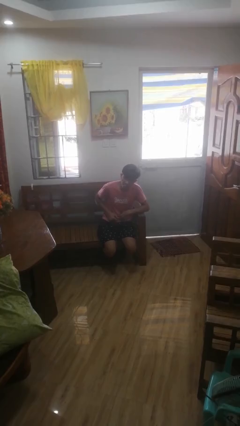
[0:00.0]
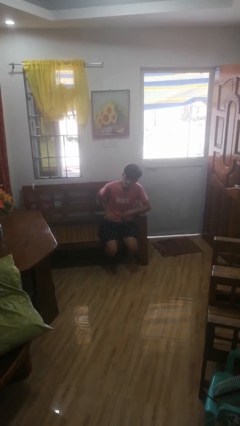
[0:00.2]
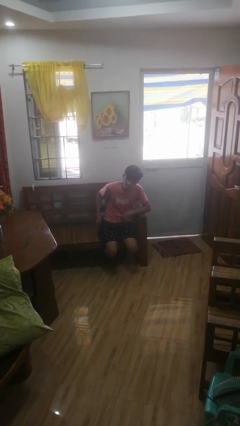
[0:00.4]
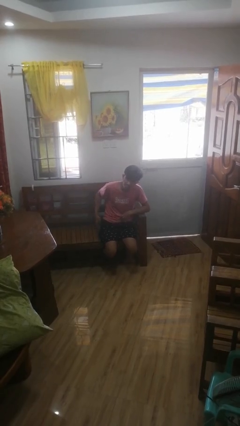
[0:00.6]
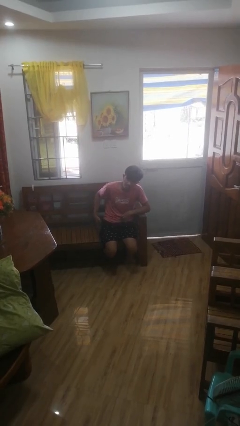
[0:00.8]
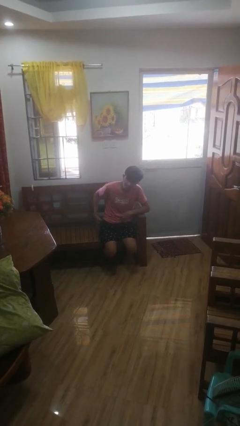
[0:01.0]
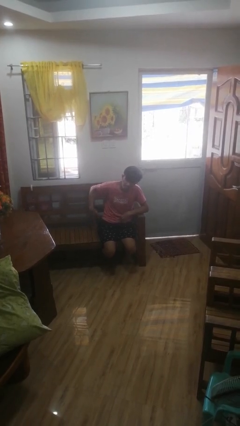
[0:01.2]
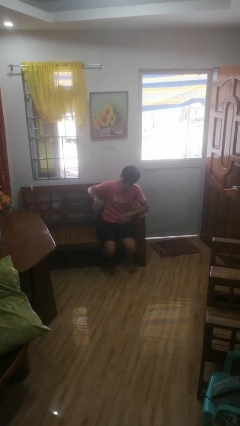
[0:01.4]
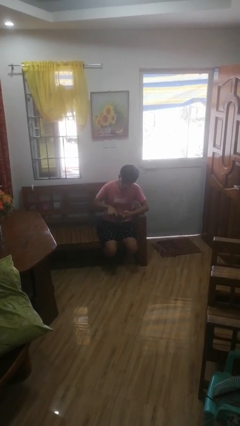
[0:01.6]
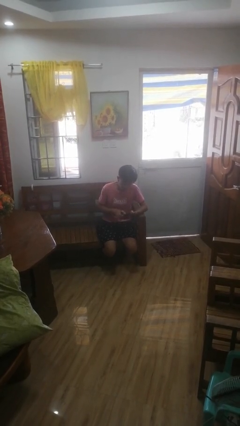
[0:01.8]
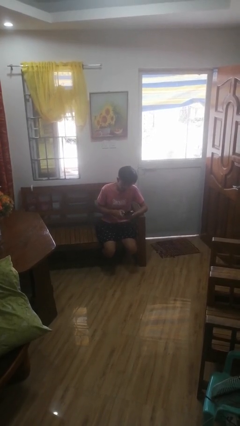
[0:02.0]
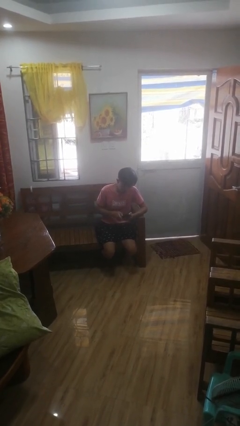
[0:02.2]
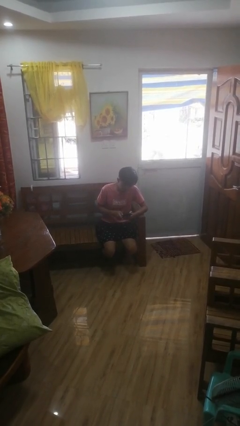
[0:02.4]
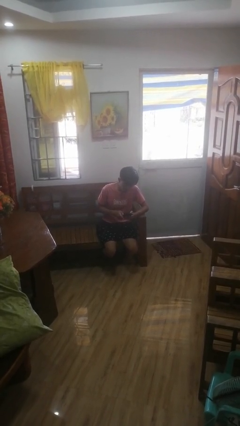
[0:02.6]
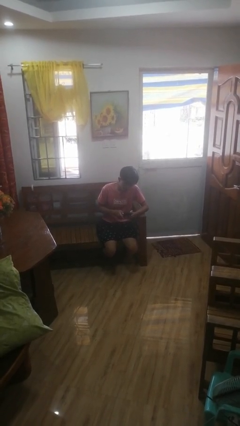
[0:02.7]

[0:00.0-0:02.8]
person takes phone from pocket

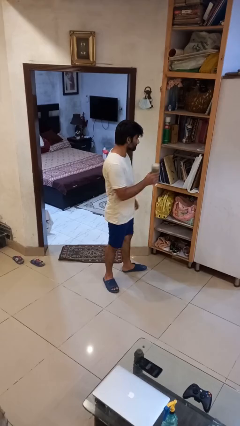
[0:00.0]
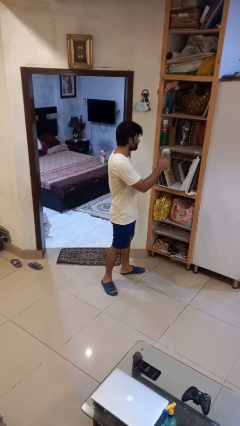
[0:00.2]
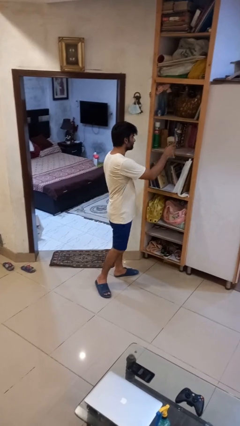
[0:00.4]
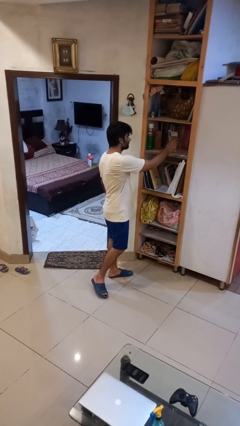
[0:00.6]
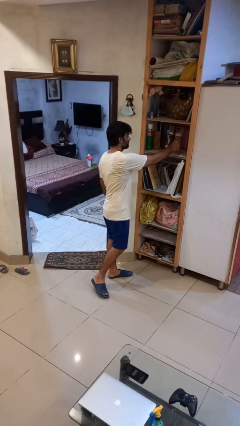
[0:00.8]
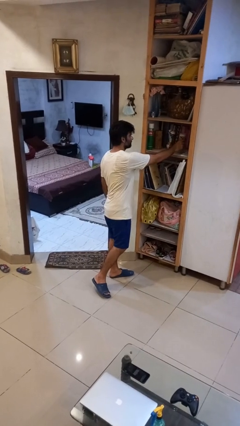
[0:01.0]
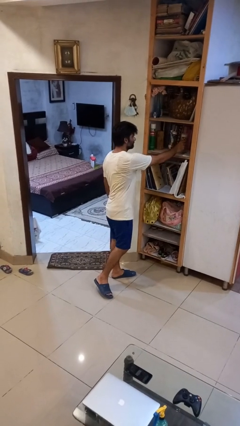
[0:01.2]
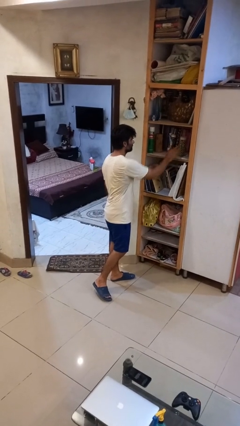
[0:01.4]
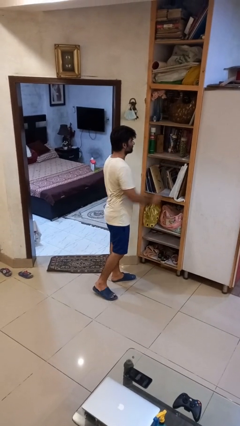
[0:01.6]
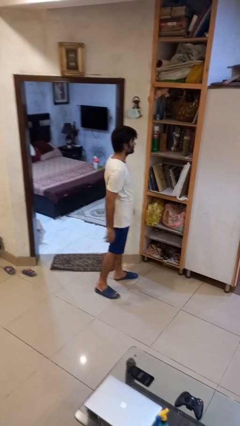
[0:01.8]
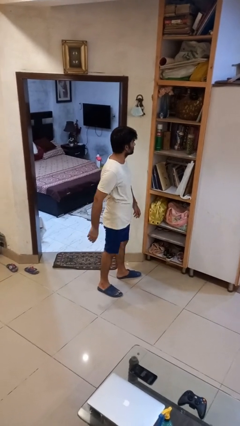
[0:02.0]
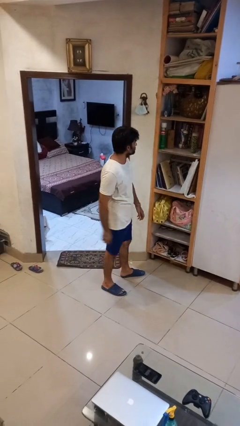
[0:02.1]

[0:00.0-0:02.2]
person puts down object into cabinet

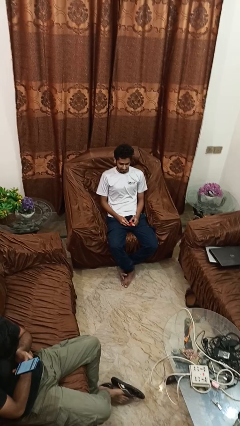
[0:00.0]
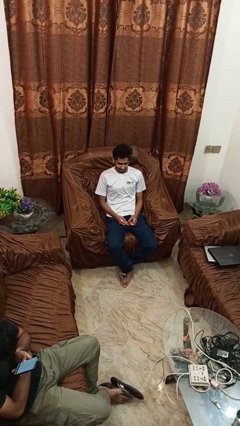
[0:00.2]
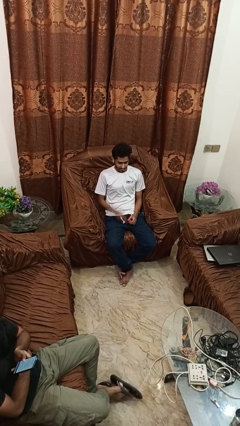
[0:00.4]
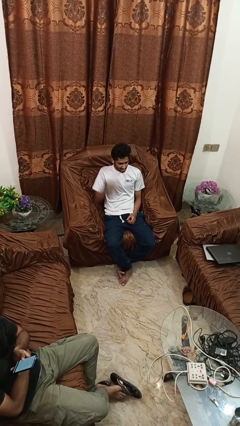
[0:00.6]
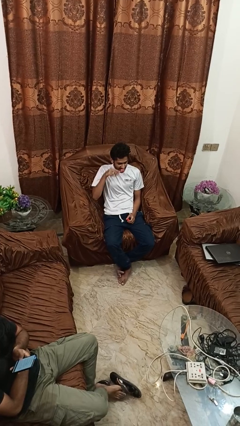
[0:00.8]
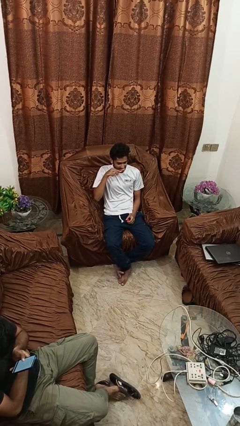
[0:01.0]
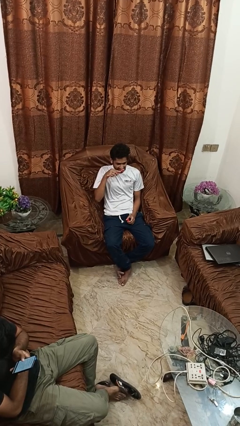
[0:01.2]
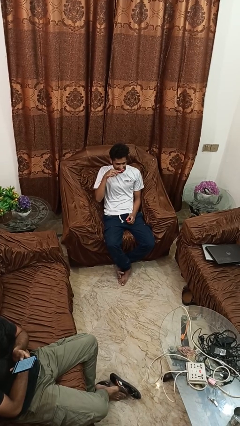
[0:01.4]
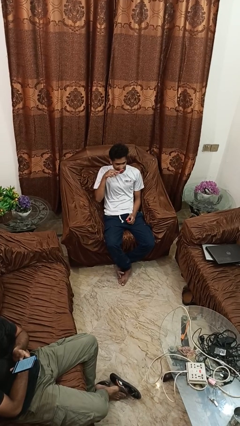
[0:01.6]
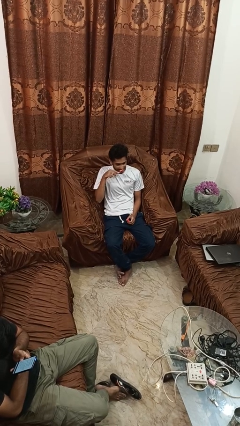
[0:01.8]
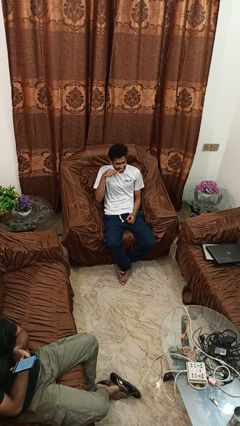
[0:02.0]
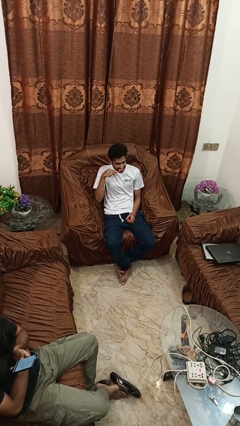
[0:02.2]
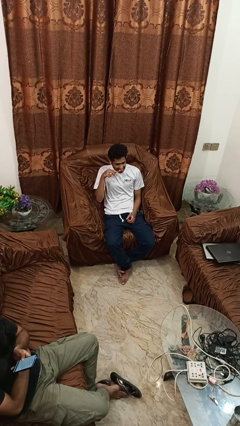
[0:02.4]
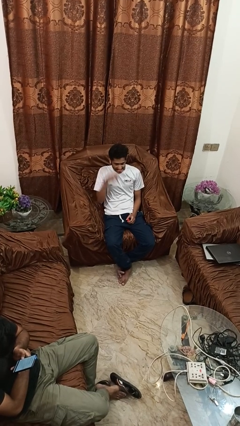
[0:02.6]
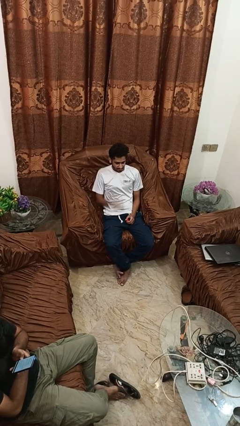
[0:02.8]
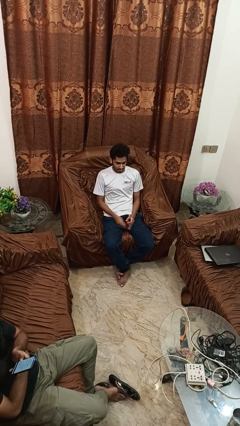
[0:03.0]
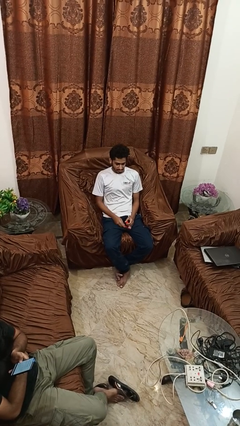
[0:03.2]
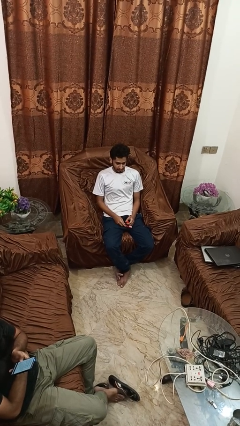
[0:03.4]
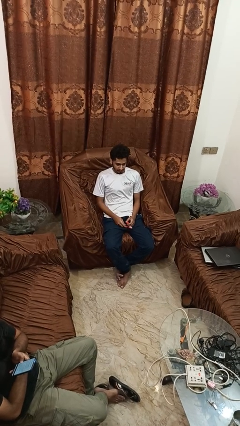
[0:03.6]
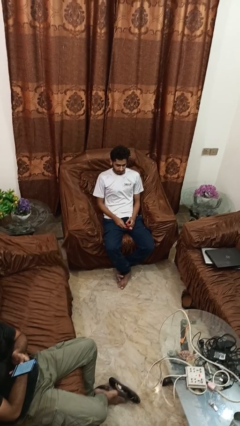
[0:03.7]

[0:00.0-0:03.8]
person brushes teeth

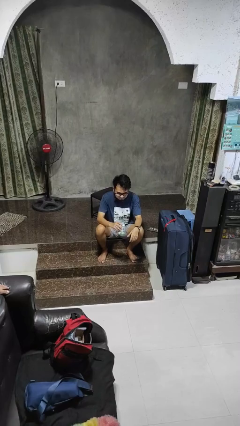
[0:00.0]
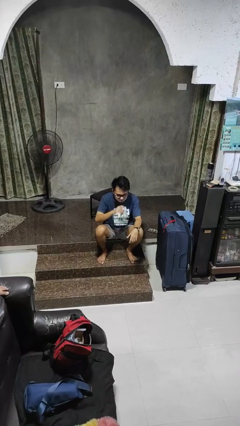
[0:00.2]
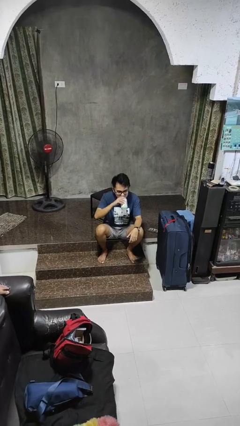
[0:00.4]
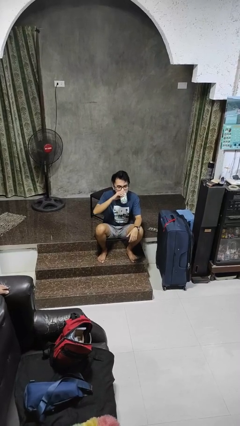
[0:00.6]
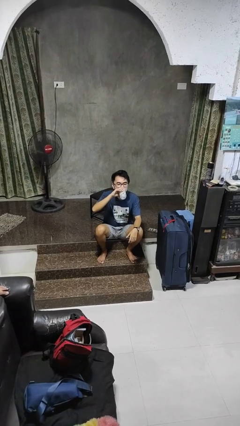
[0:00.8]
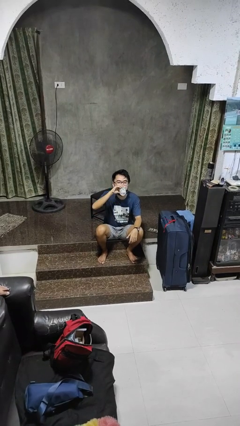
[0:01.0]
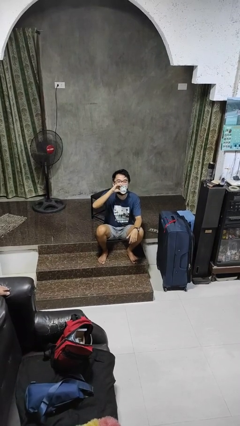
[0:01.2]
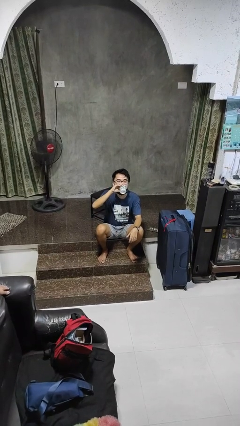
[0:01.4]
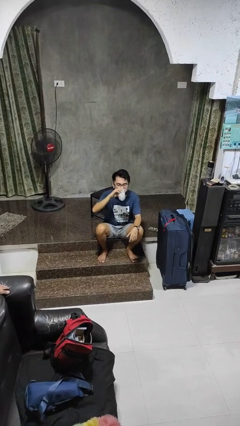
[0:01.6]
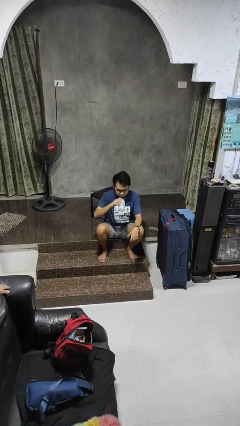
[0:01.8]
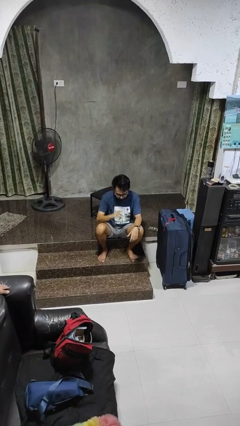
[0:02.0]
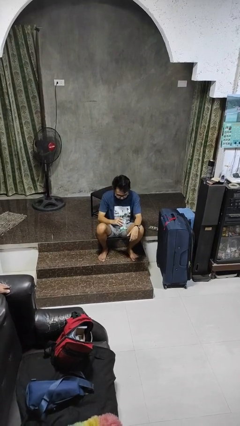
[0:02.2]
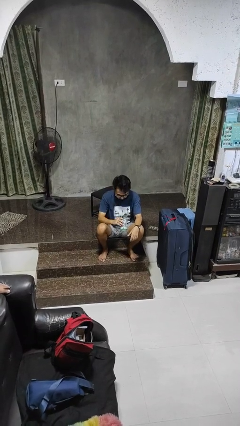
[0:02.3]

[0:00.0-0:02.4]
person drinks from beverage can

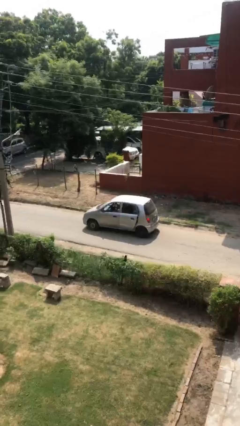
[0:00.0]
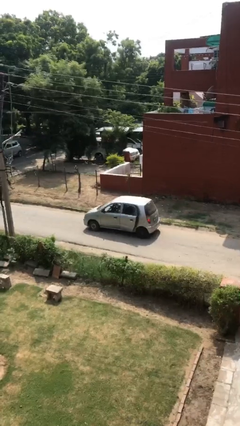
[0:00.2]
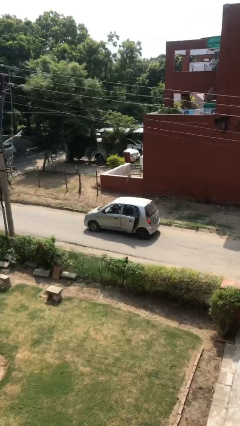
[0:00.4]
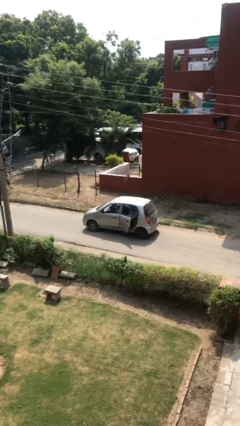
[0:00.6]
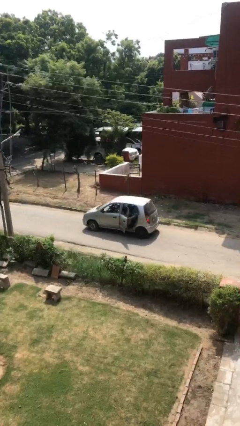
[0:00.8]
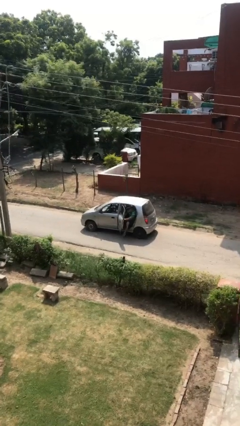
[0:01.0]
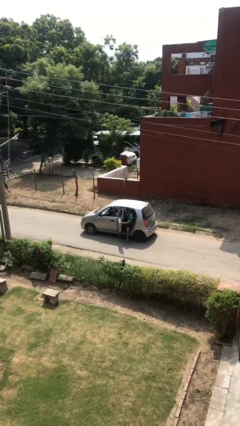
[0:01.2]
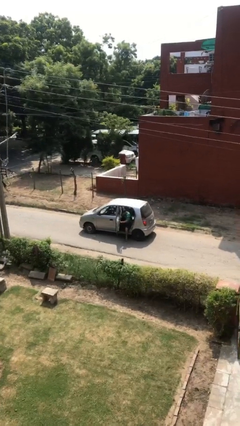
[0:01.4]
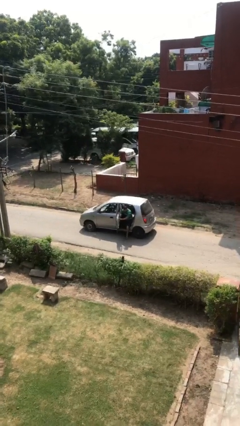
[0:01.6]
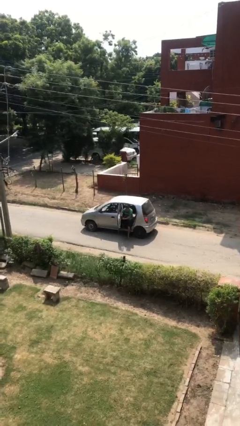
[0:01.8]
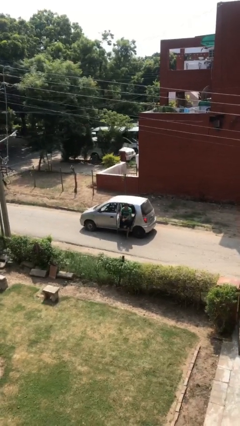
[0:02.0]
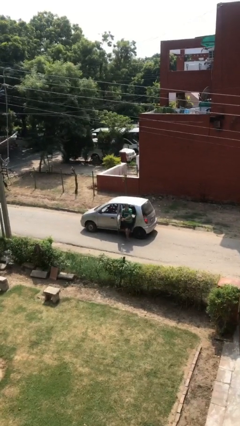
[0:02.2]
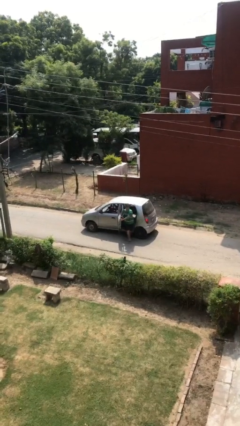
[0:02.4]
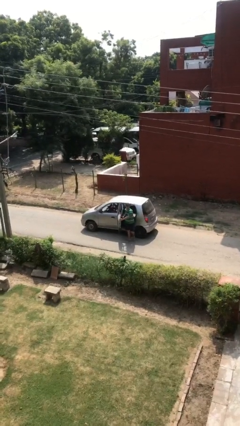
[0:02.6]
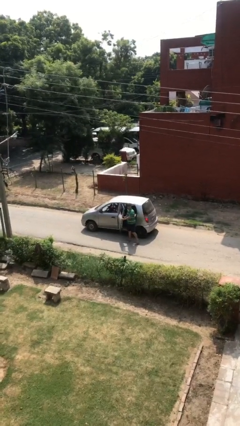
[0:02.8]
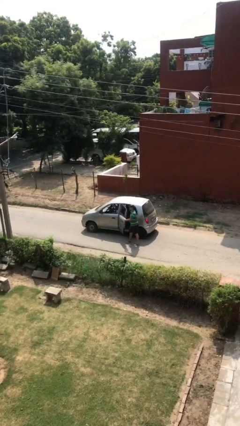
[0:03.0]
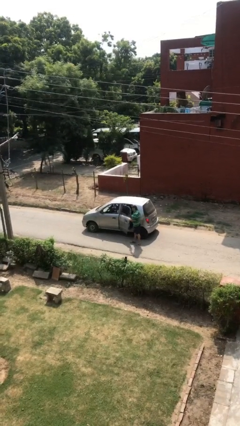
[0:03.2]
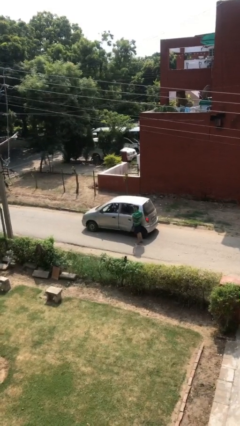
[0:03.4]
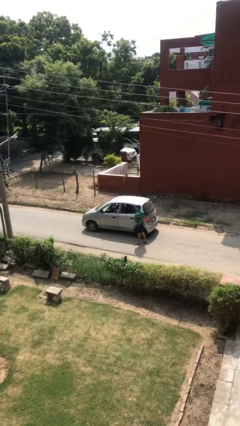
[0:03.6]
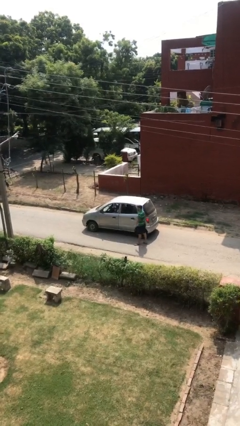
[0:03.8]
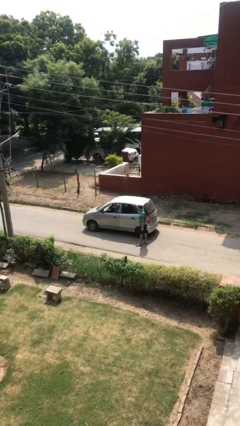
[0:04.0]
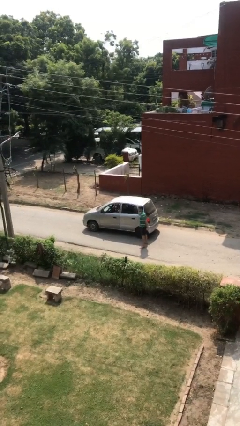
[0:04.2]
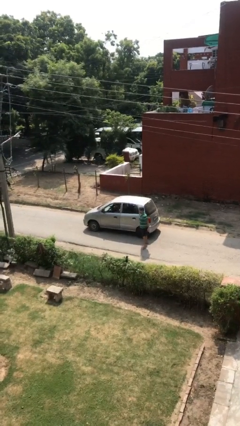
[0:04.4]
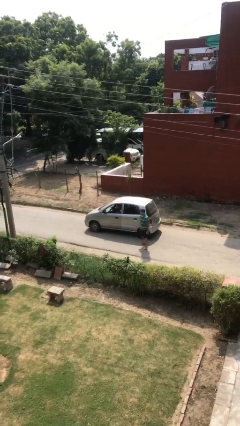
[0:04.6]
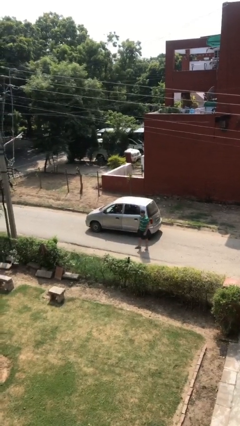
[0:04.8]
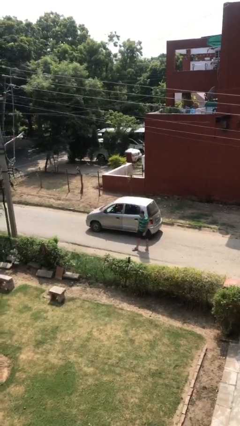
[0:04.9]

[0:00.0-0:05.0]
car drops off person

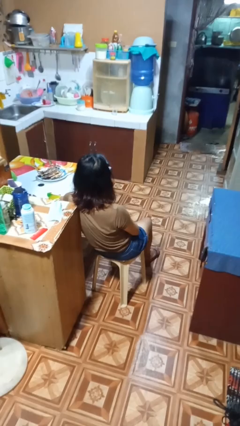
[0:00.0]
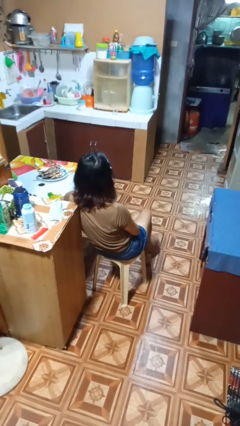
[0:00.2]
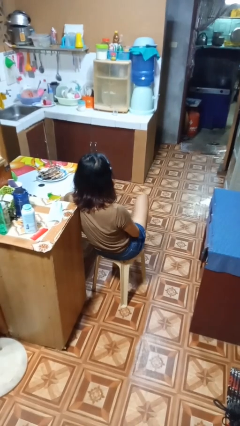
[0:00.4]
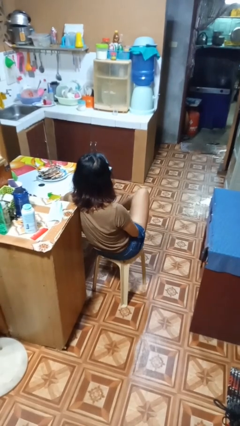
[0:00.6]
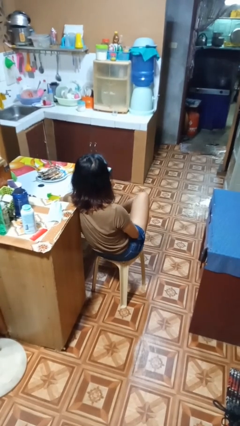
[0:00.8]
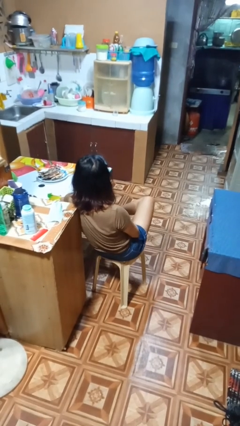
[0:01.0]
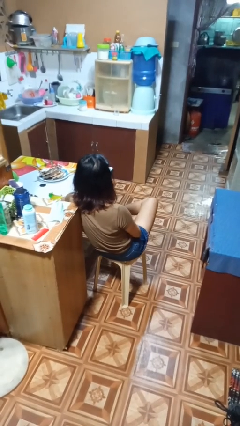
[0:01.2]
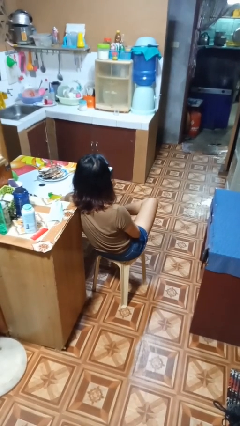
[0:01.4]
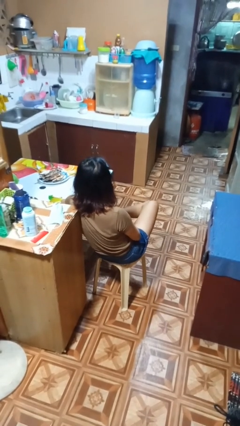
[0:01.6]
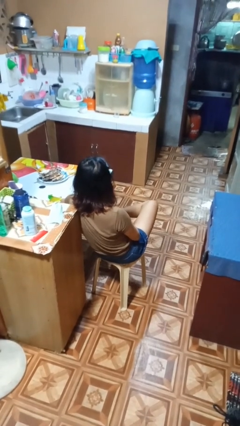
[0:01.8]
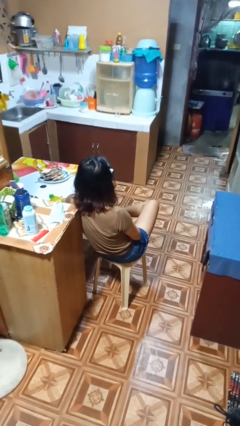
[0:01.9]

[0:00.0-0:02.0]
person crosses legs
